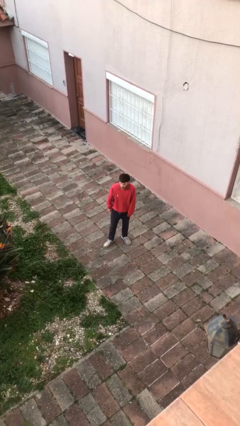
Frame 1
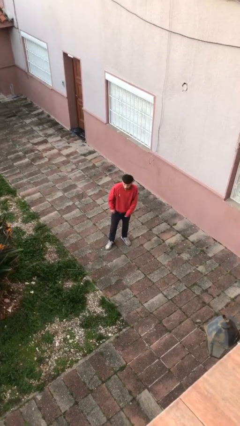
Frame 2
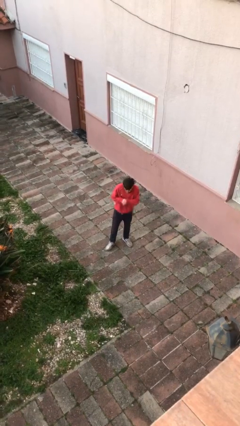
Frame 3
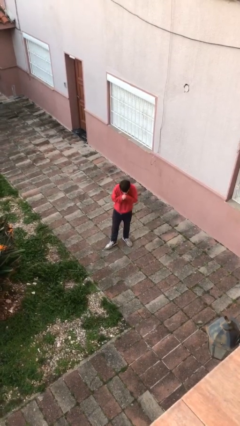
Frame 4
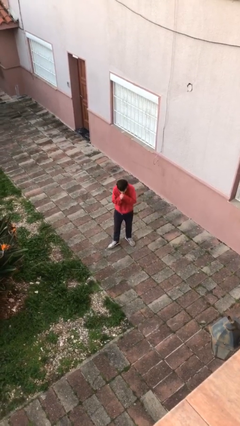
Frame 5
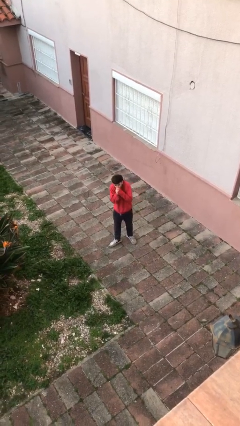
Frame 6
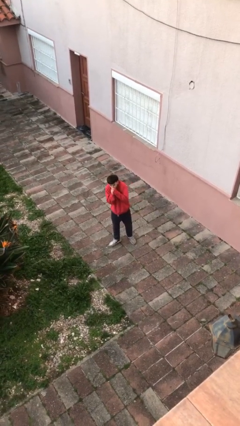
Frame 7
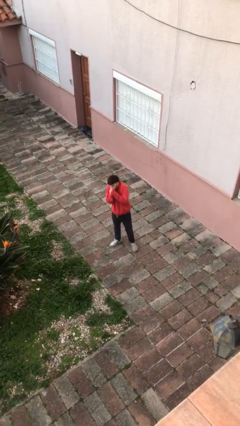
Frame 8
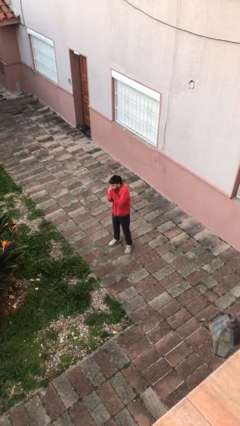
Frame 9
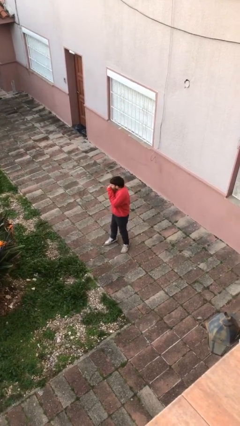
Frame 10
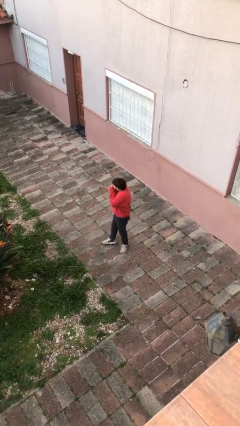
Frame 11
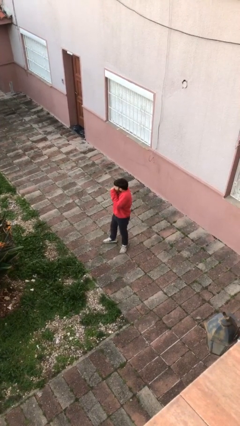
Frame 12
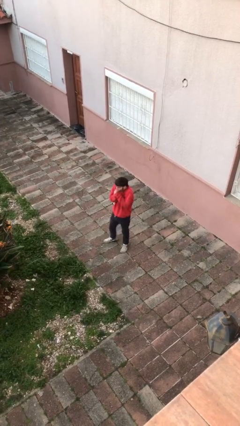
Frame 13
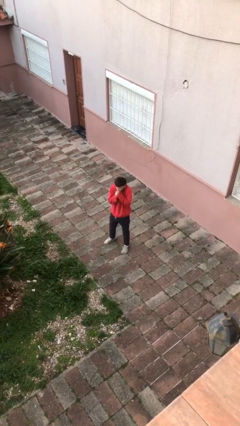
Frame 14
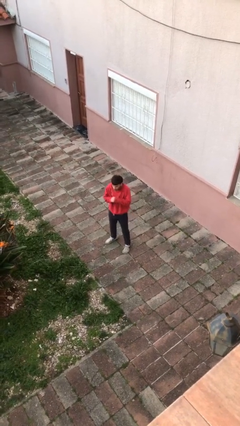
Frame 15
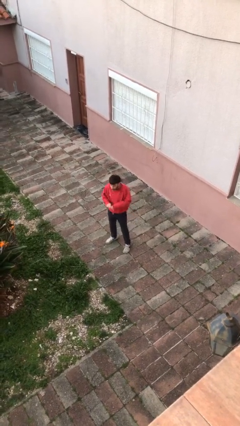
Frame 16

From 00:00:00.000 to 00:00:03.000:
person blows into hands

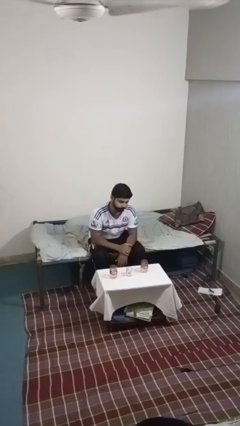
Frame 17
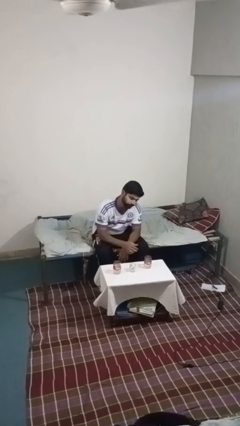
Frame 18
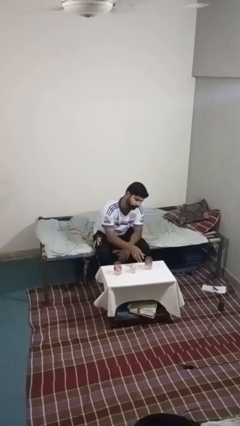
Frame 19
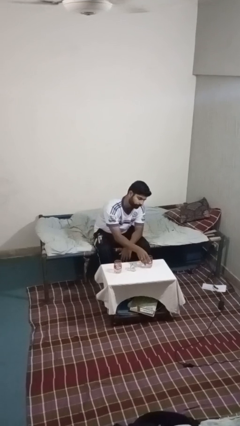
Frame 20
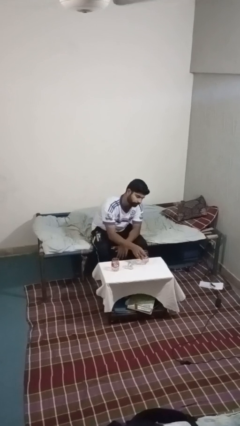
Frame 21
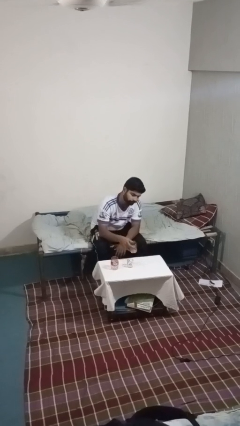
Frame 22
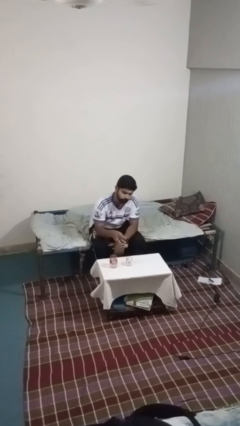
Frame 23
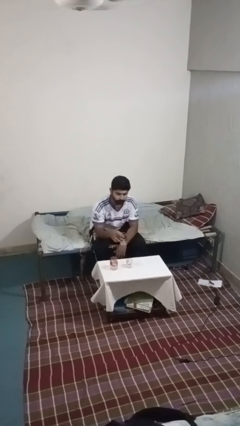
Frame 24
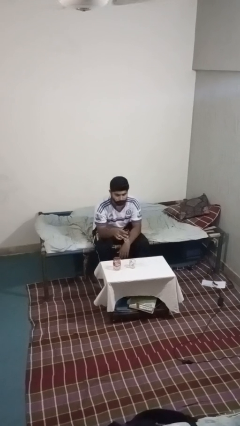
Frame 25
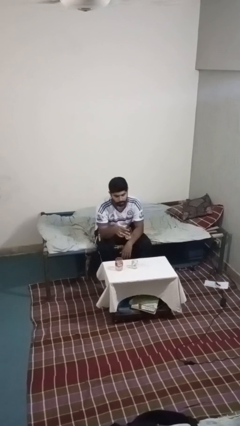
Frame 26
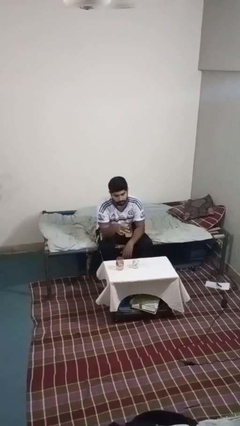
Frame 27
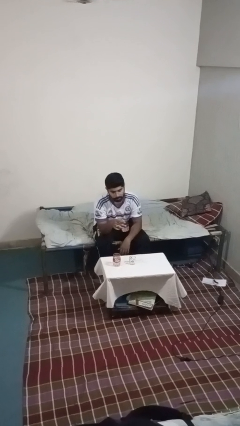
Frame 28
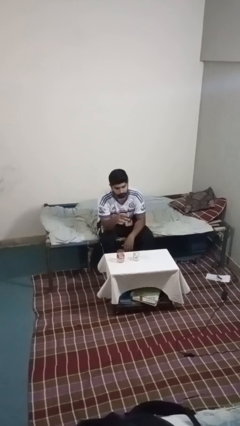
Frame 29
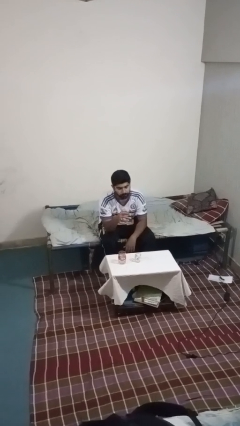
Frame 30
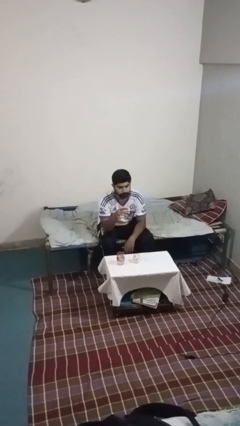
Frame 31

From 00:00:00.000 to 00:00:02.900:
person picks up object from table

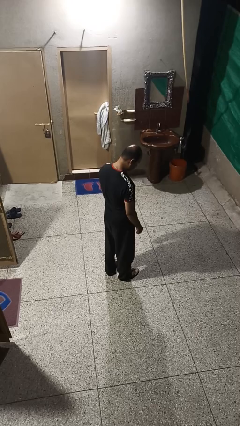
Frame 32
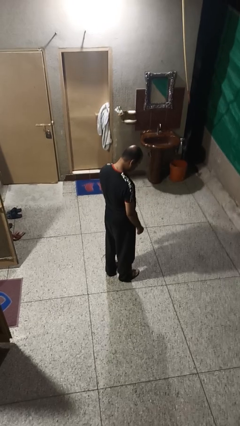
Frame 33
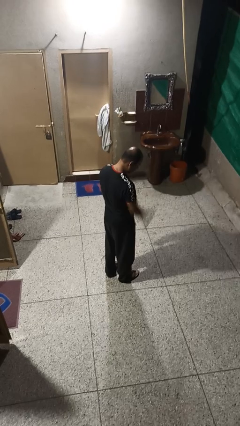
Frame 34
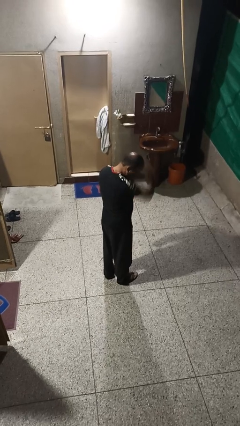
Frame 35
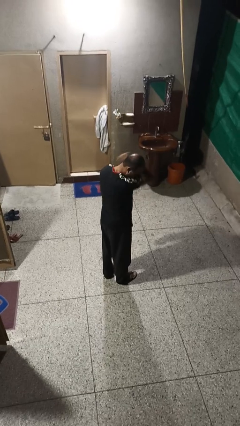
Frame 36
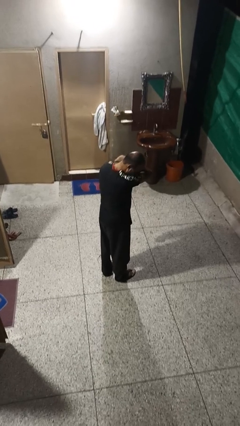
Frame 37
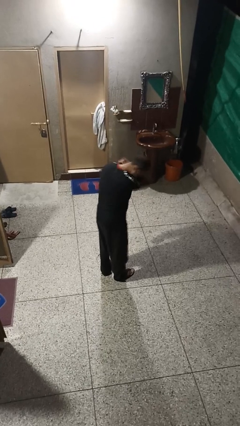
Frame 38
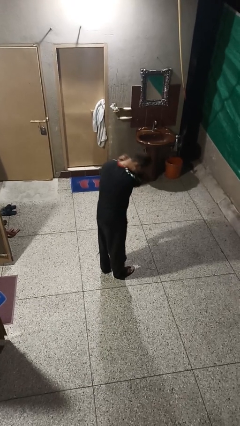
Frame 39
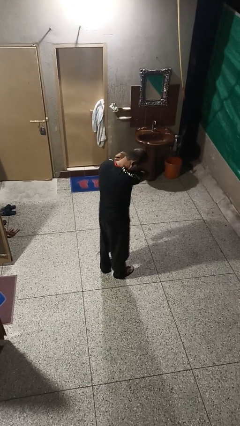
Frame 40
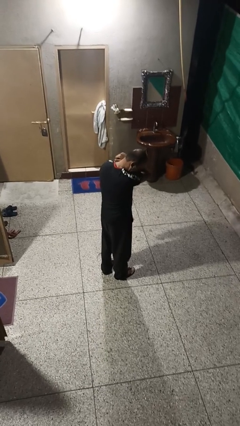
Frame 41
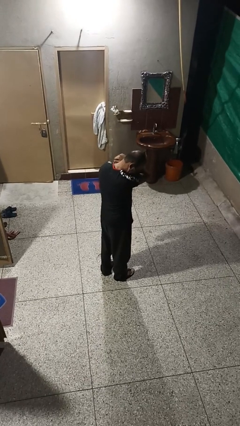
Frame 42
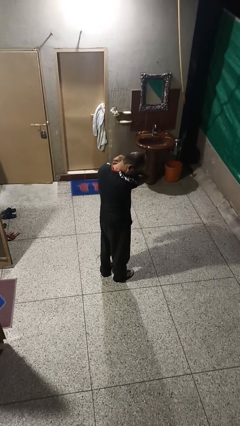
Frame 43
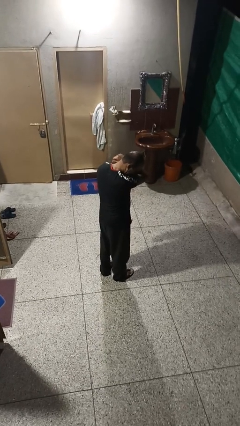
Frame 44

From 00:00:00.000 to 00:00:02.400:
person sneezes into arm

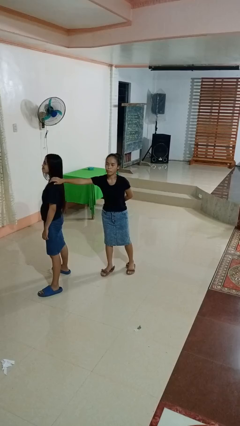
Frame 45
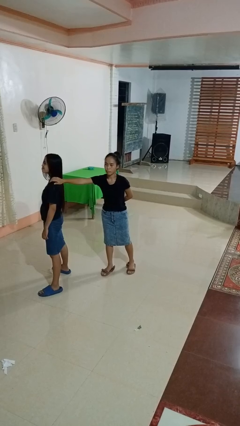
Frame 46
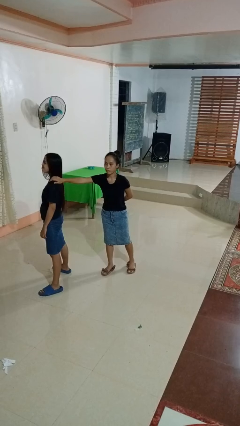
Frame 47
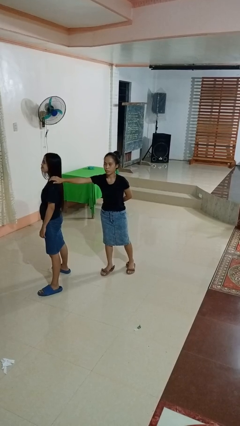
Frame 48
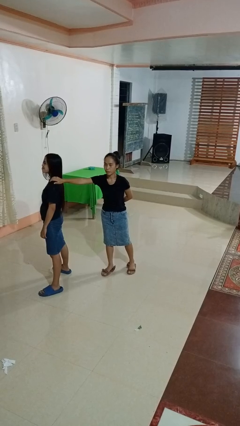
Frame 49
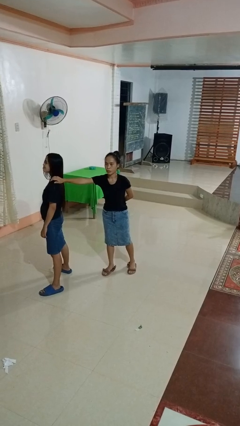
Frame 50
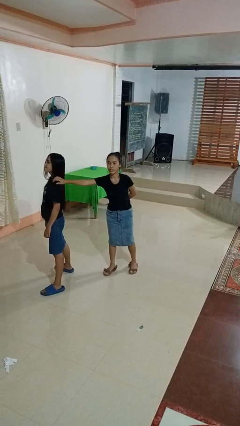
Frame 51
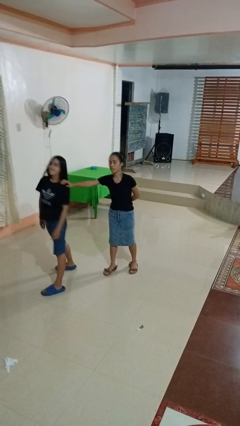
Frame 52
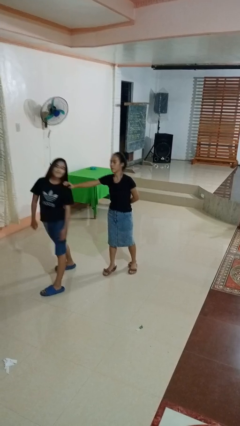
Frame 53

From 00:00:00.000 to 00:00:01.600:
person grabs person by shoulder

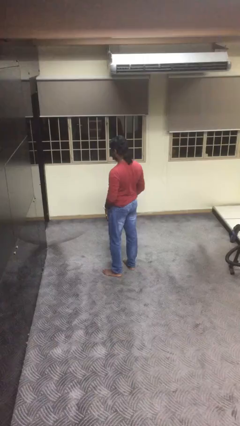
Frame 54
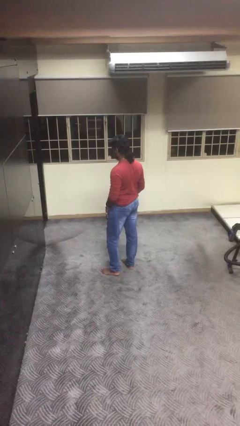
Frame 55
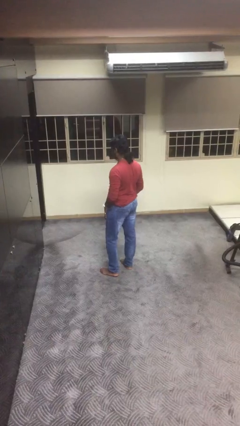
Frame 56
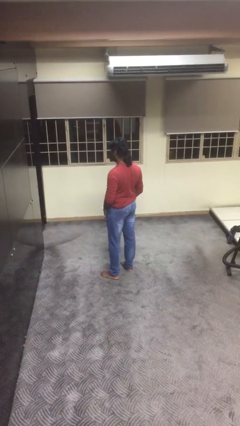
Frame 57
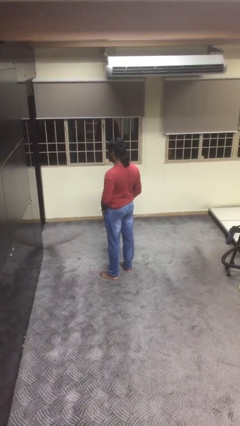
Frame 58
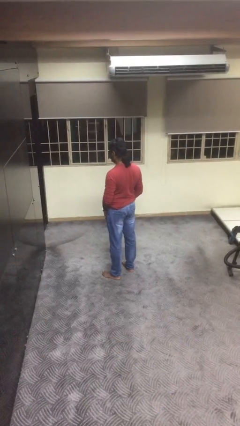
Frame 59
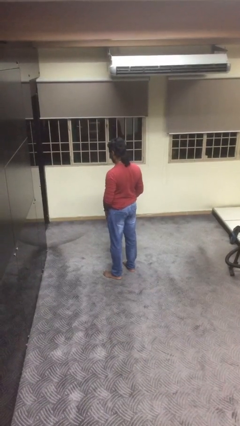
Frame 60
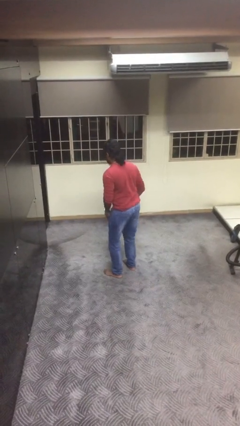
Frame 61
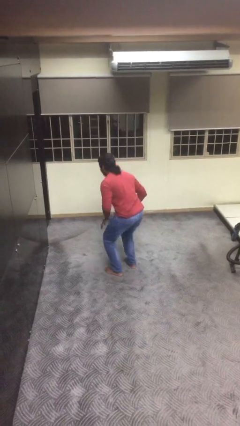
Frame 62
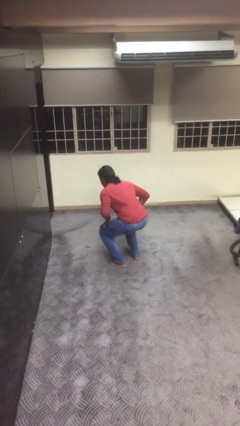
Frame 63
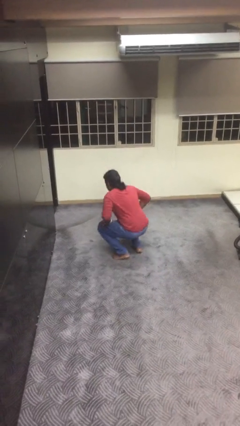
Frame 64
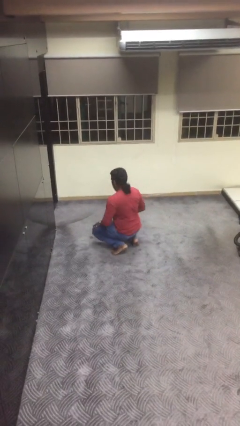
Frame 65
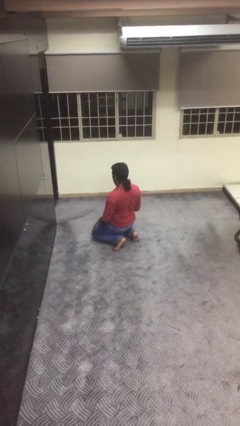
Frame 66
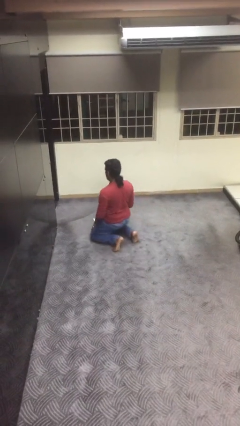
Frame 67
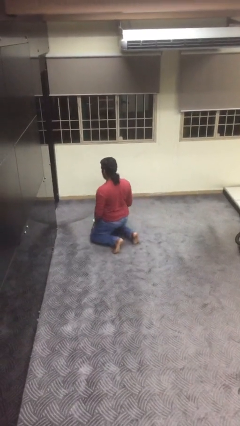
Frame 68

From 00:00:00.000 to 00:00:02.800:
person kneels

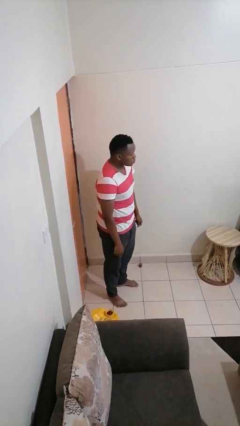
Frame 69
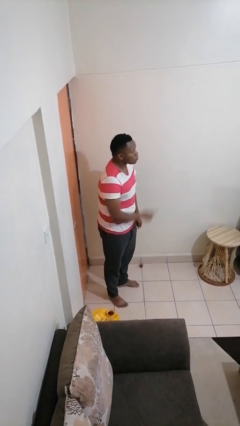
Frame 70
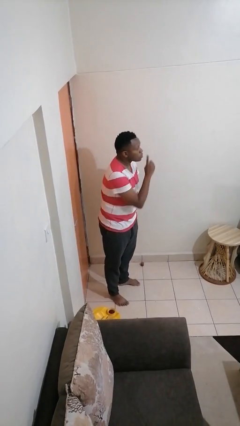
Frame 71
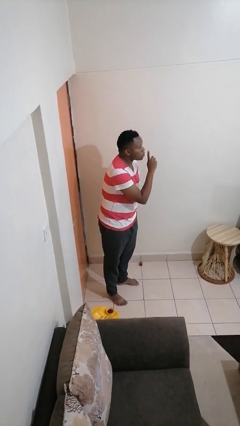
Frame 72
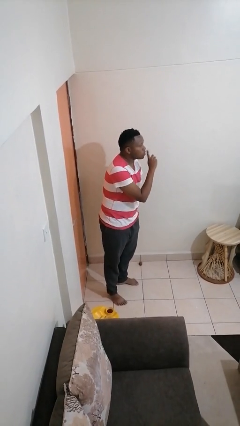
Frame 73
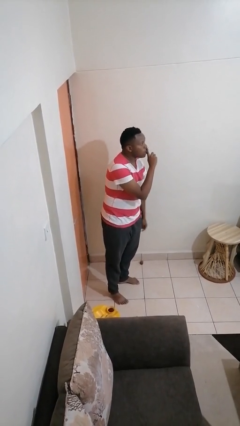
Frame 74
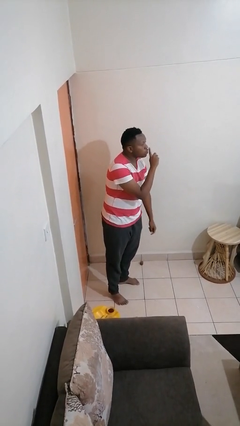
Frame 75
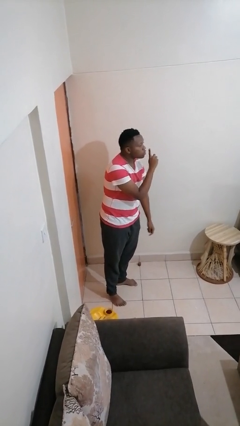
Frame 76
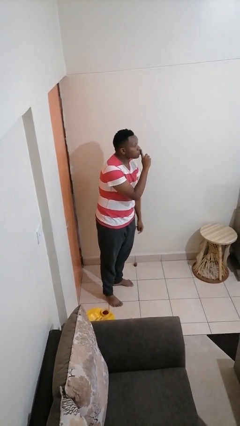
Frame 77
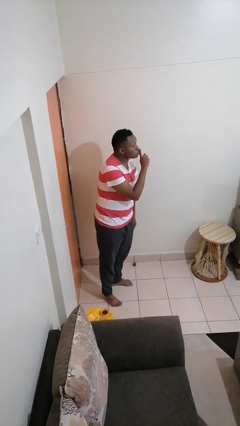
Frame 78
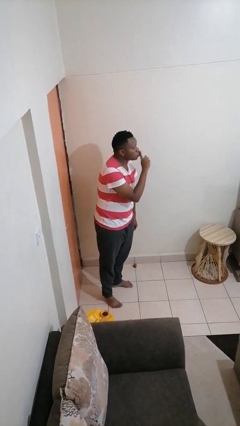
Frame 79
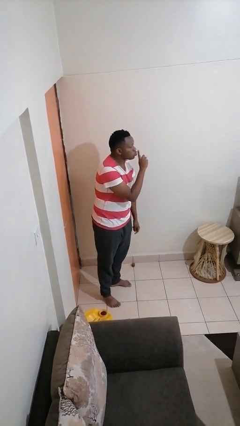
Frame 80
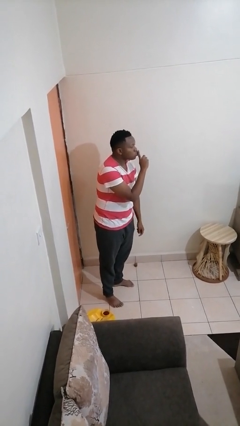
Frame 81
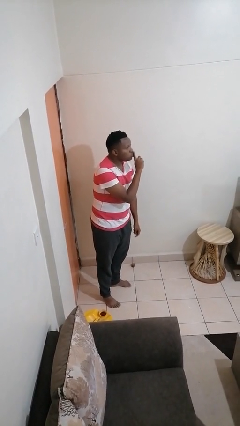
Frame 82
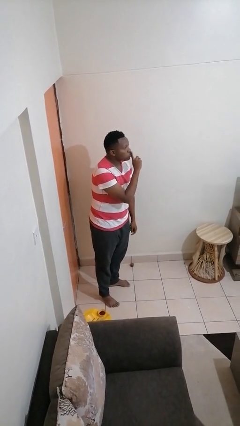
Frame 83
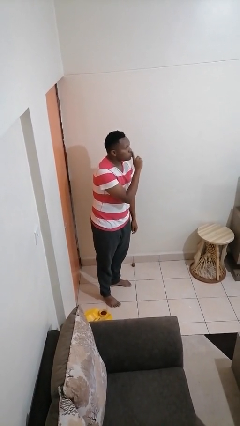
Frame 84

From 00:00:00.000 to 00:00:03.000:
person gestures be quiet

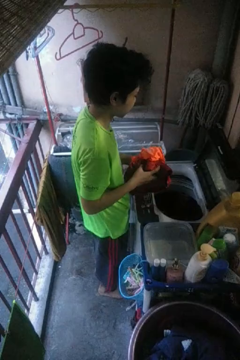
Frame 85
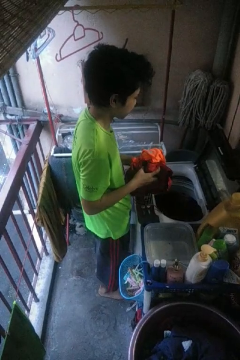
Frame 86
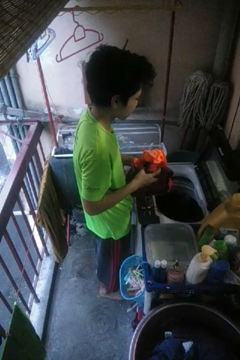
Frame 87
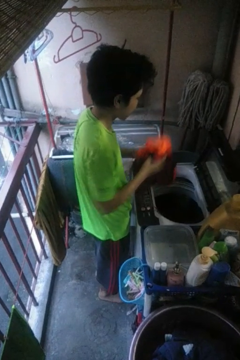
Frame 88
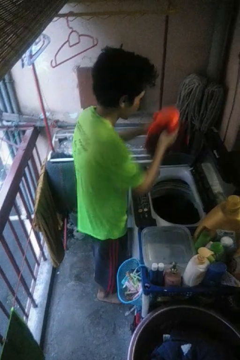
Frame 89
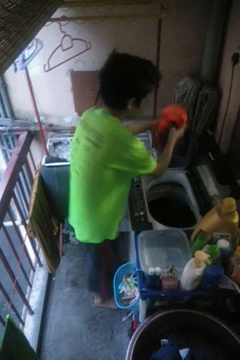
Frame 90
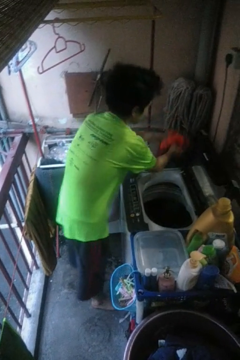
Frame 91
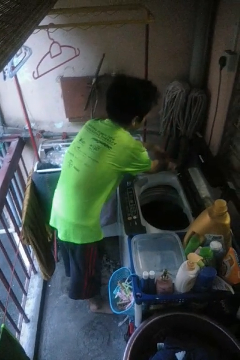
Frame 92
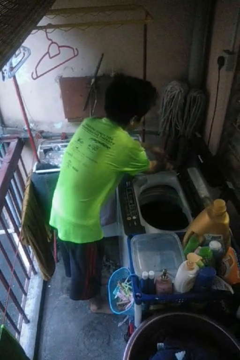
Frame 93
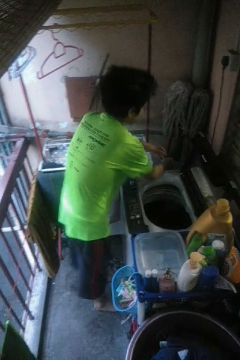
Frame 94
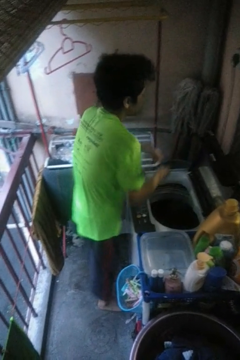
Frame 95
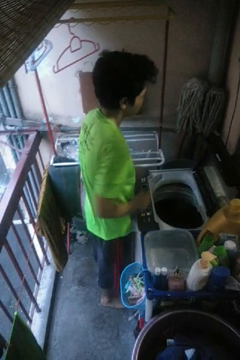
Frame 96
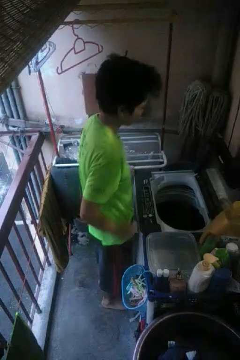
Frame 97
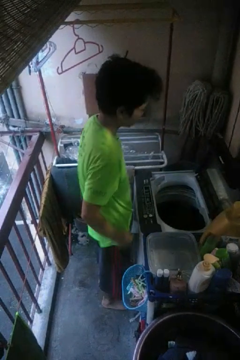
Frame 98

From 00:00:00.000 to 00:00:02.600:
person loads dryer
